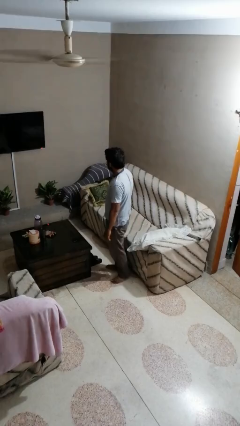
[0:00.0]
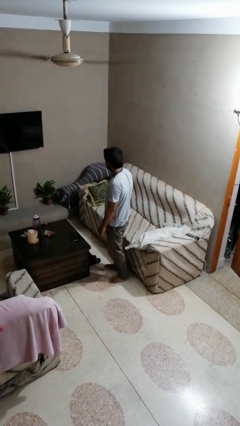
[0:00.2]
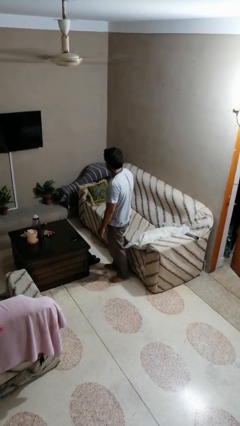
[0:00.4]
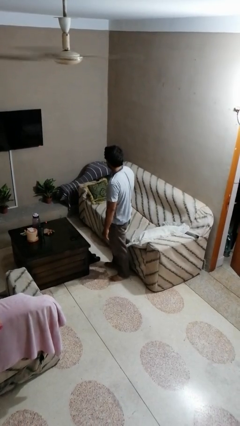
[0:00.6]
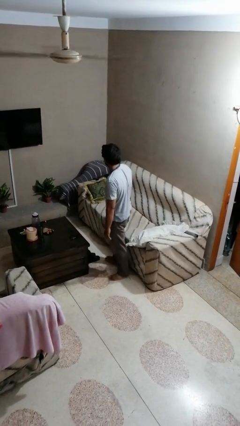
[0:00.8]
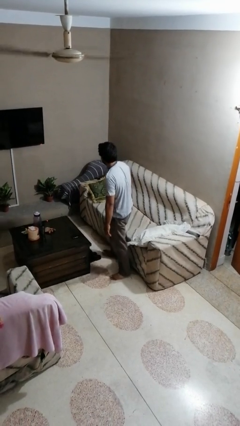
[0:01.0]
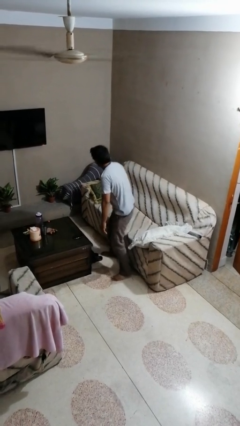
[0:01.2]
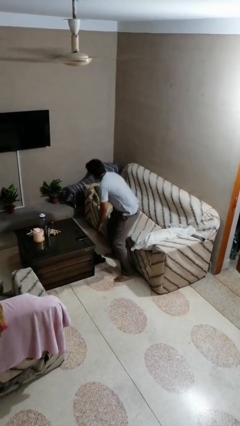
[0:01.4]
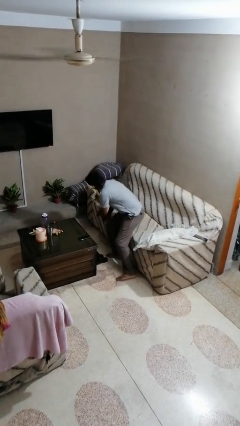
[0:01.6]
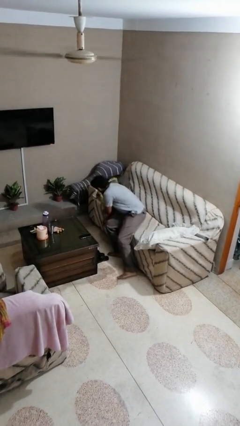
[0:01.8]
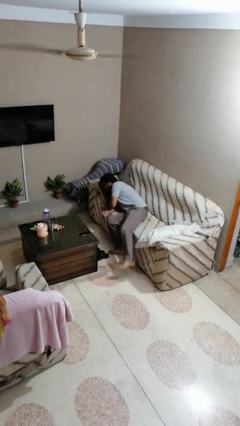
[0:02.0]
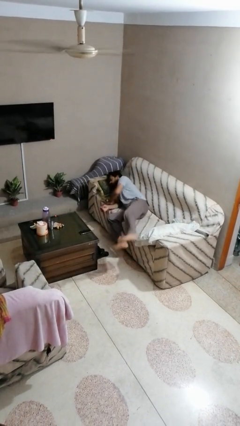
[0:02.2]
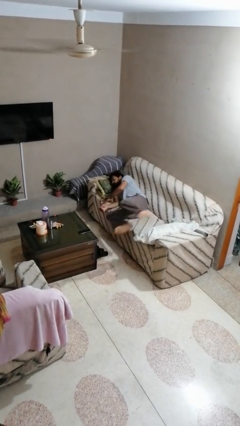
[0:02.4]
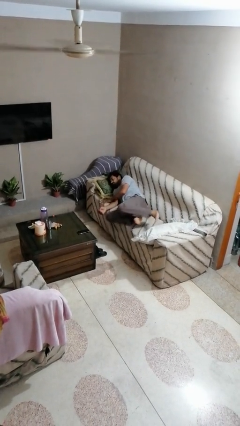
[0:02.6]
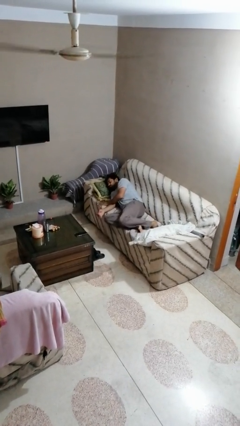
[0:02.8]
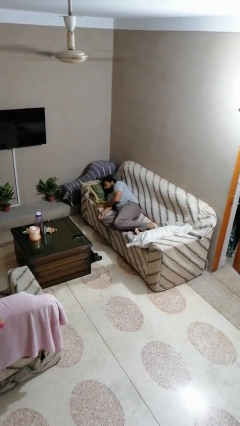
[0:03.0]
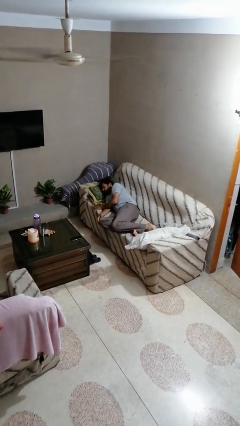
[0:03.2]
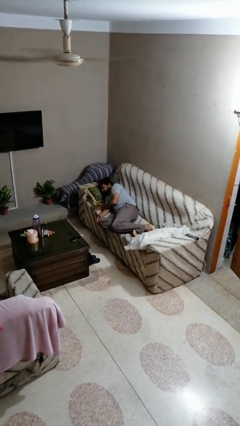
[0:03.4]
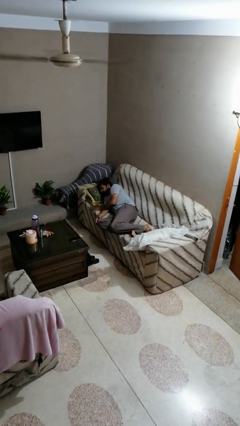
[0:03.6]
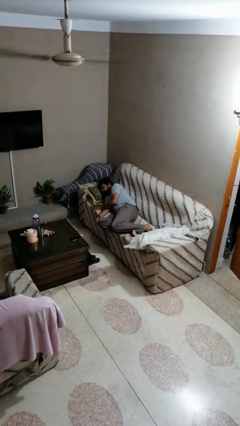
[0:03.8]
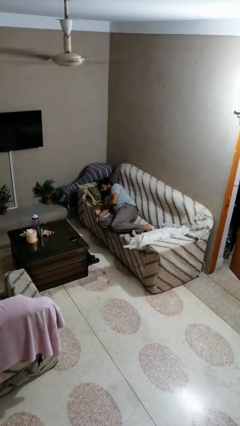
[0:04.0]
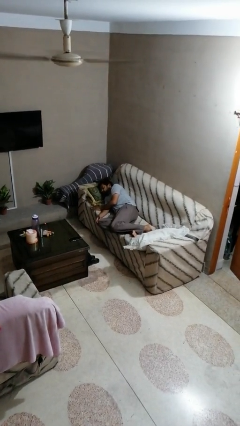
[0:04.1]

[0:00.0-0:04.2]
person lies down on couch

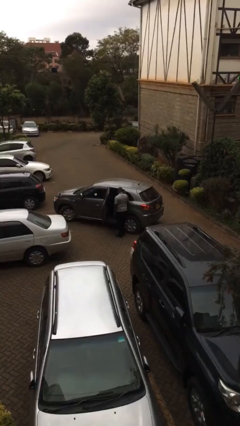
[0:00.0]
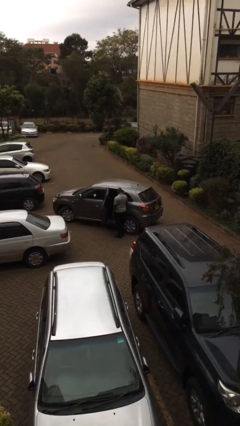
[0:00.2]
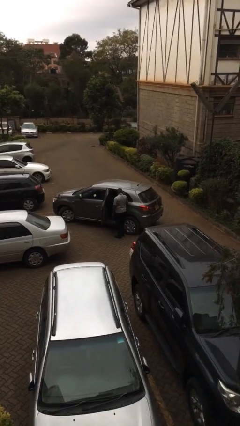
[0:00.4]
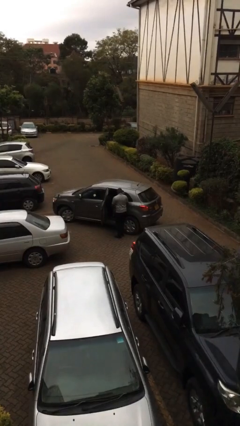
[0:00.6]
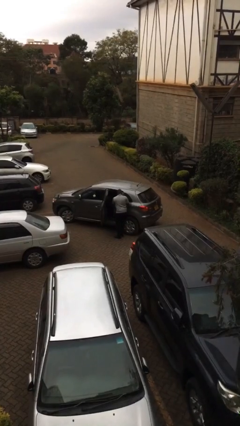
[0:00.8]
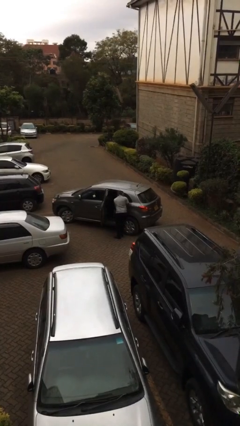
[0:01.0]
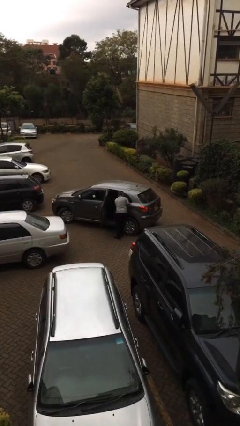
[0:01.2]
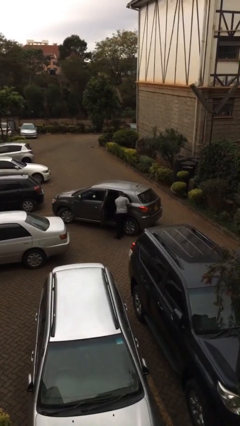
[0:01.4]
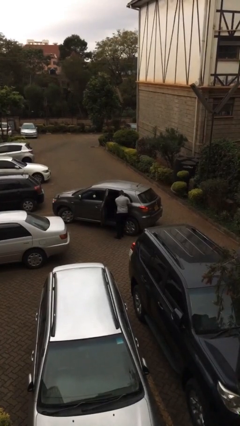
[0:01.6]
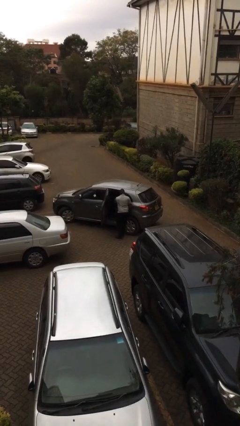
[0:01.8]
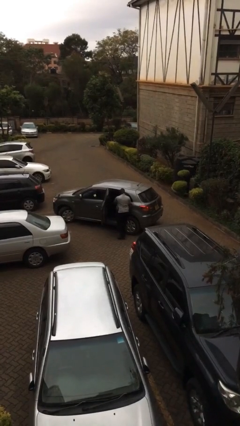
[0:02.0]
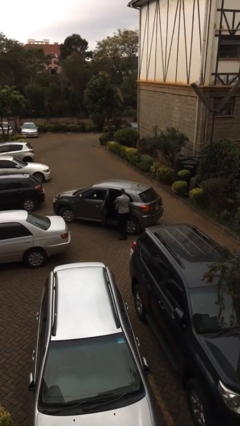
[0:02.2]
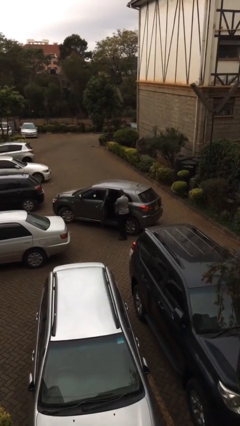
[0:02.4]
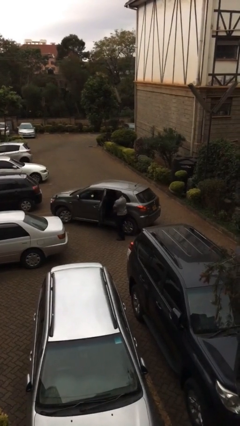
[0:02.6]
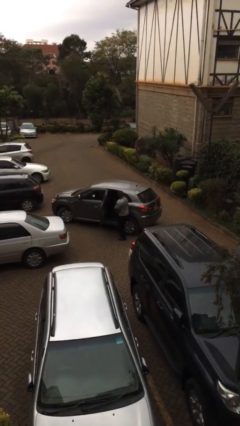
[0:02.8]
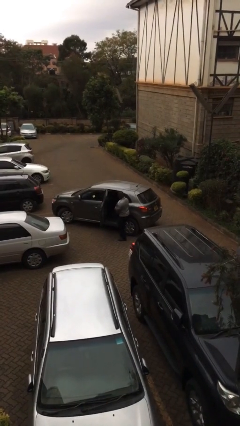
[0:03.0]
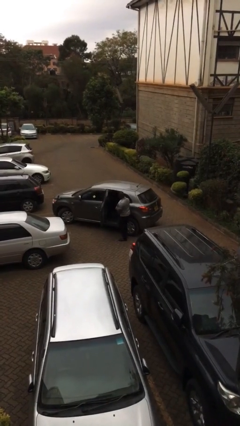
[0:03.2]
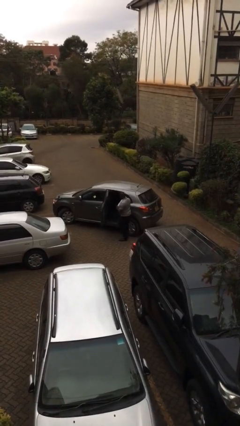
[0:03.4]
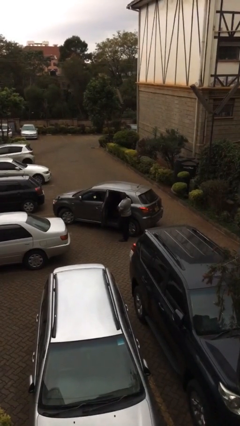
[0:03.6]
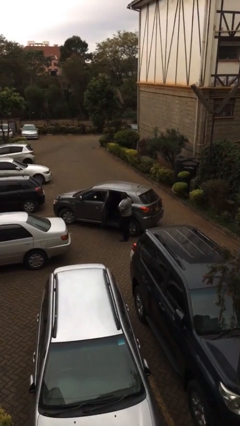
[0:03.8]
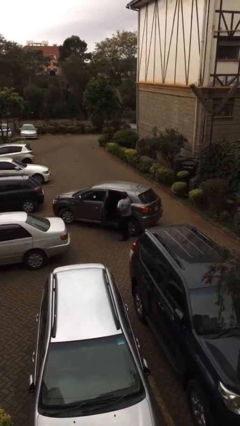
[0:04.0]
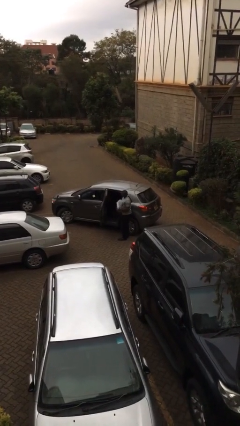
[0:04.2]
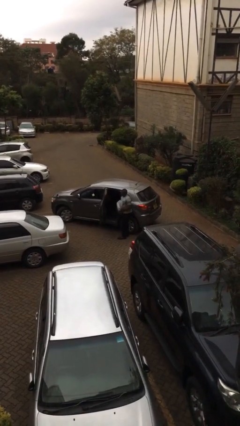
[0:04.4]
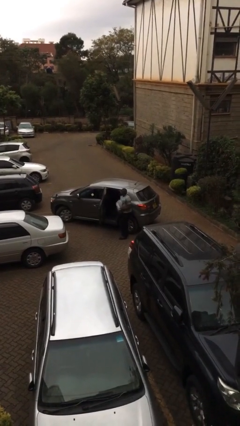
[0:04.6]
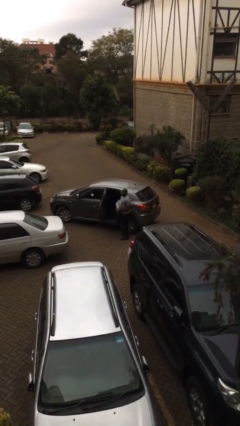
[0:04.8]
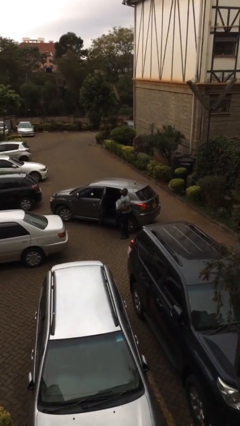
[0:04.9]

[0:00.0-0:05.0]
person unloads car

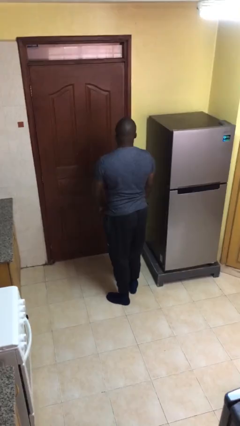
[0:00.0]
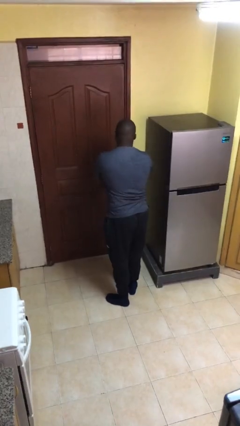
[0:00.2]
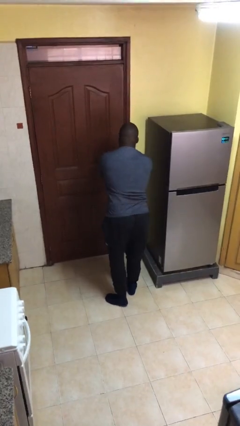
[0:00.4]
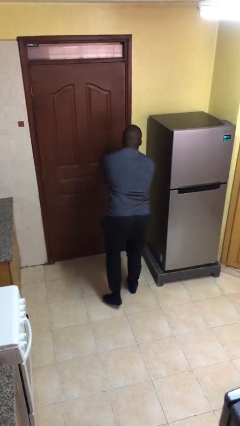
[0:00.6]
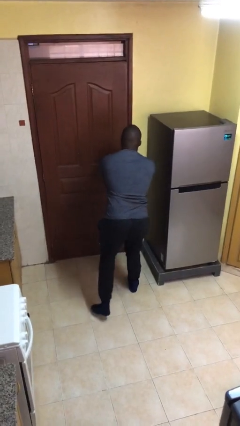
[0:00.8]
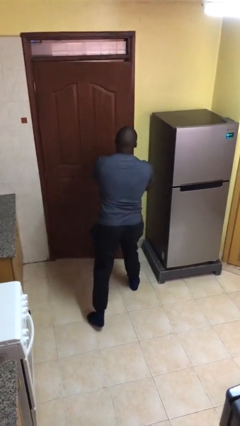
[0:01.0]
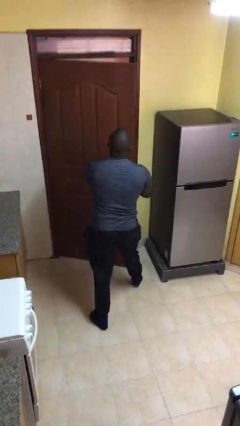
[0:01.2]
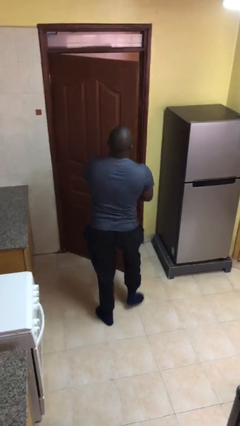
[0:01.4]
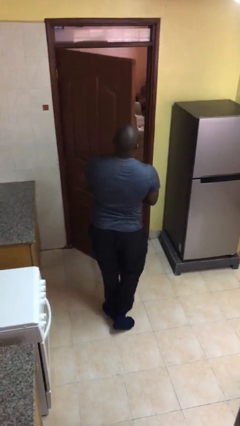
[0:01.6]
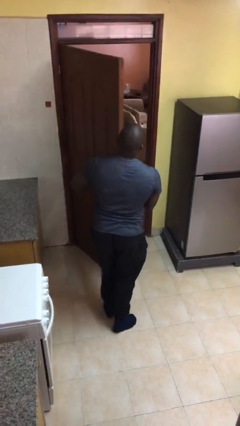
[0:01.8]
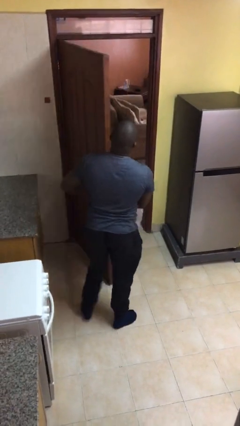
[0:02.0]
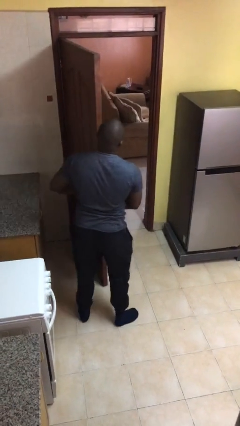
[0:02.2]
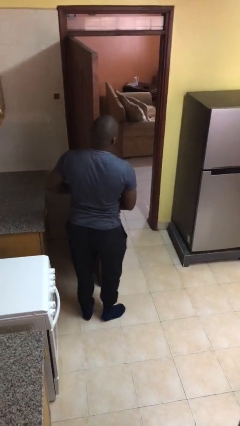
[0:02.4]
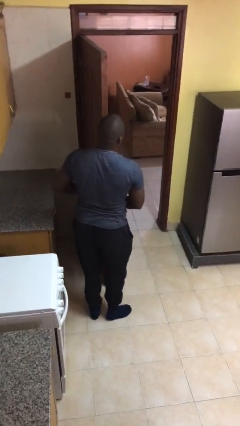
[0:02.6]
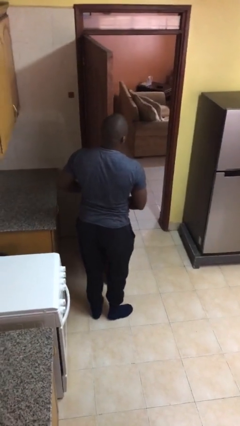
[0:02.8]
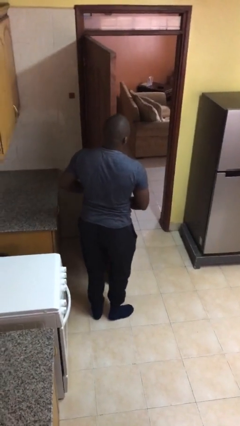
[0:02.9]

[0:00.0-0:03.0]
person opens facility door

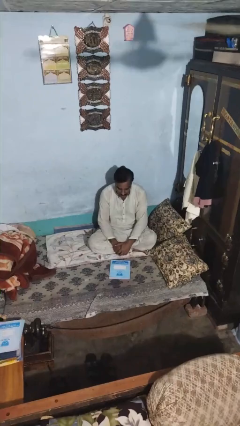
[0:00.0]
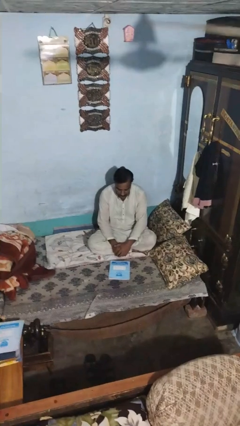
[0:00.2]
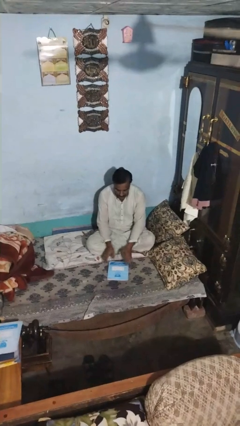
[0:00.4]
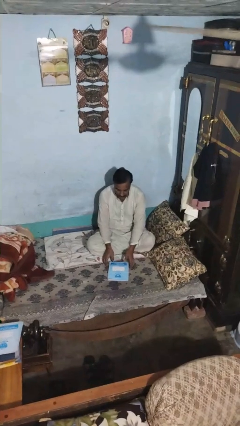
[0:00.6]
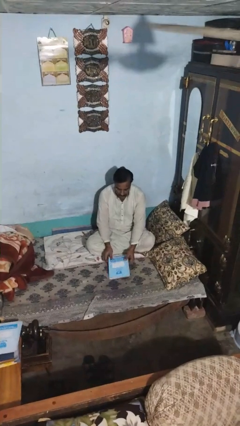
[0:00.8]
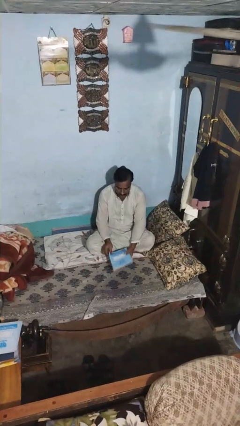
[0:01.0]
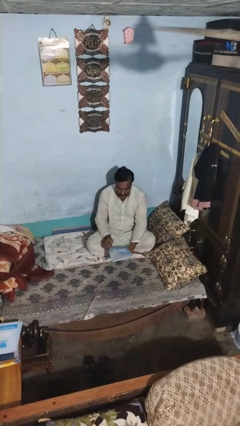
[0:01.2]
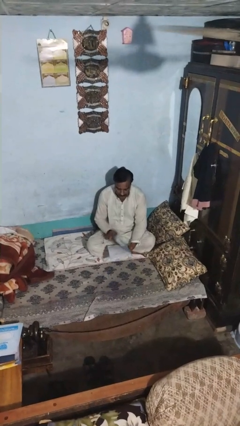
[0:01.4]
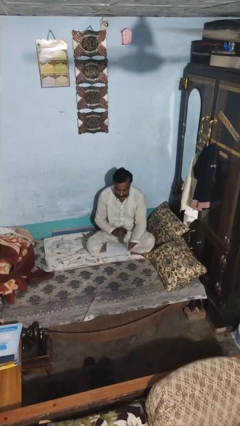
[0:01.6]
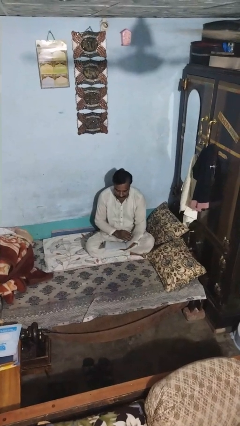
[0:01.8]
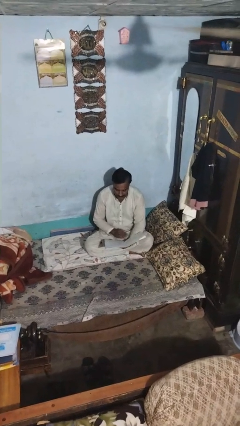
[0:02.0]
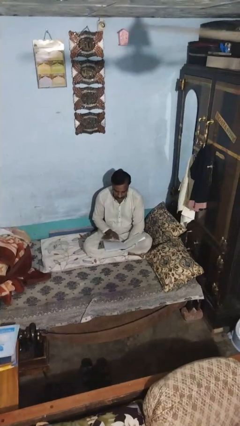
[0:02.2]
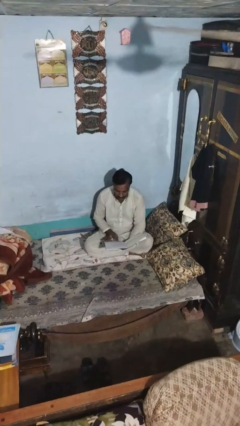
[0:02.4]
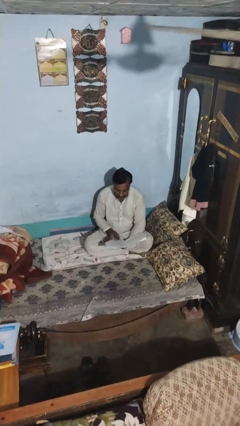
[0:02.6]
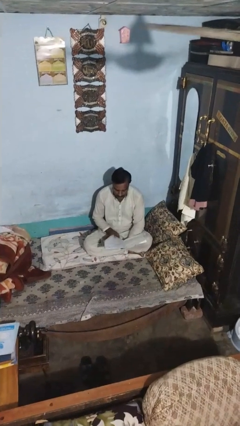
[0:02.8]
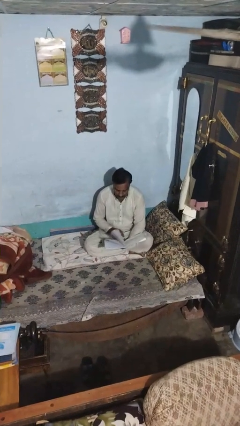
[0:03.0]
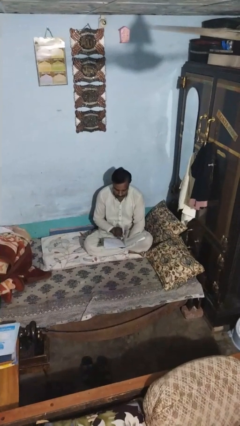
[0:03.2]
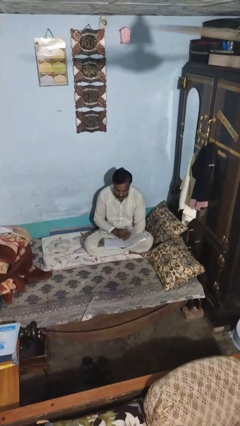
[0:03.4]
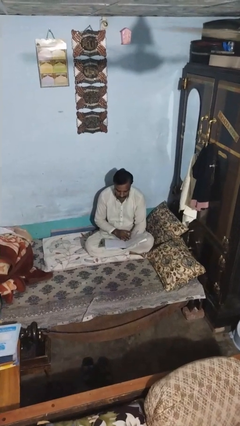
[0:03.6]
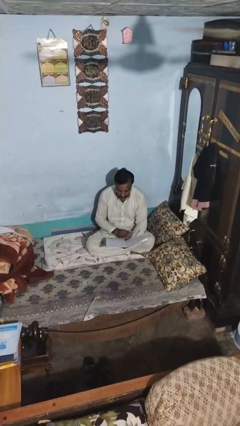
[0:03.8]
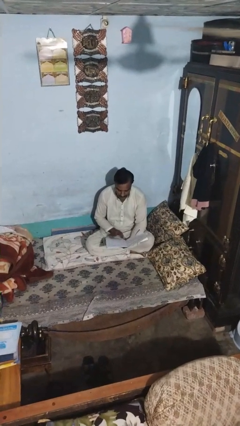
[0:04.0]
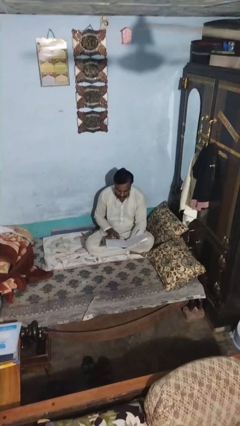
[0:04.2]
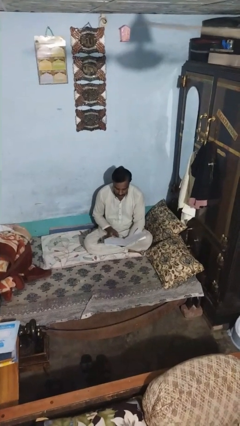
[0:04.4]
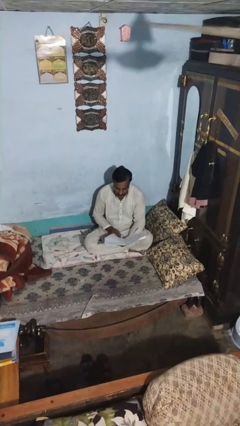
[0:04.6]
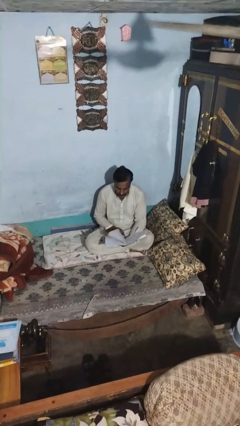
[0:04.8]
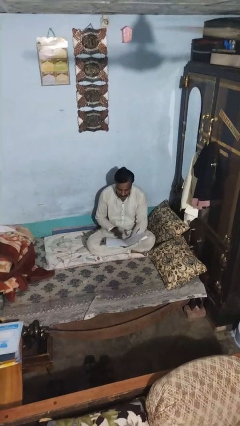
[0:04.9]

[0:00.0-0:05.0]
person reads book

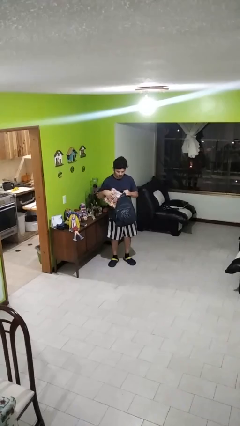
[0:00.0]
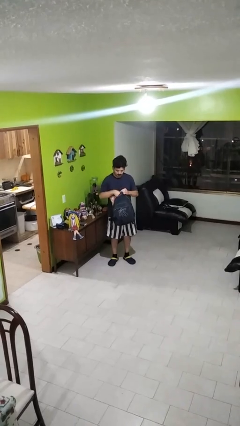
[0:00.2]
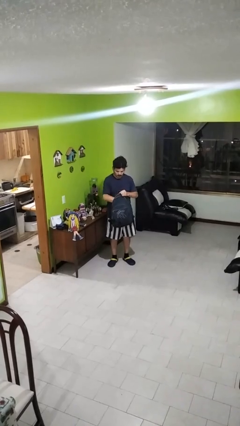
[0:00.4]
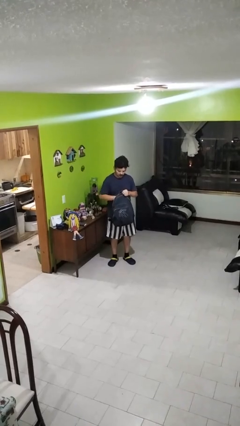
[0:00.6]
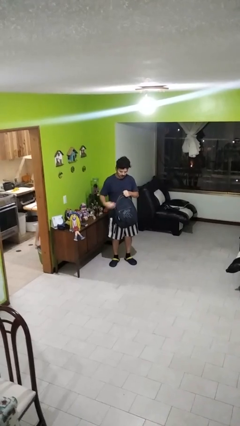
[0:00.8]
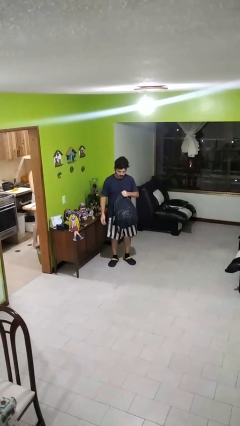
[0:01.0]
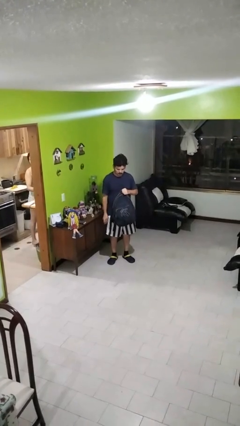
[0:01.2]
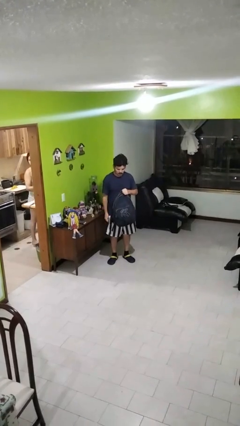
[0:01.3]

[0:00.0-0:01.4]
person puts object into backpack
